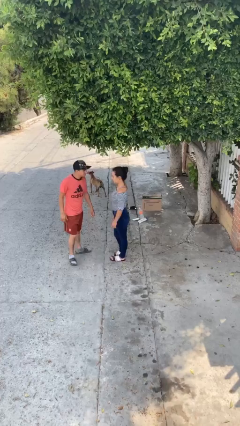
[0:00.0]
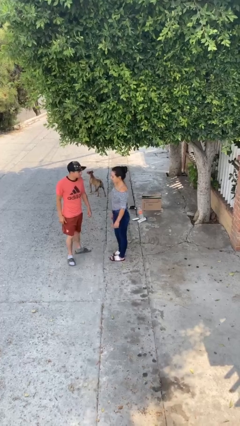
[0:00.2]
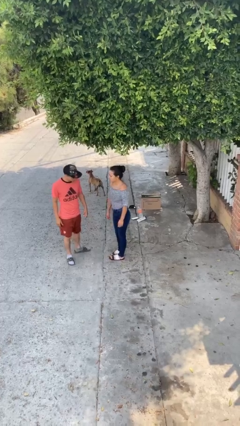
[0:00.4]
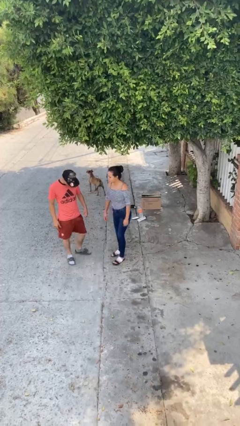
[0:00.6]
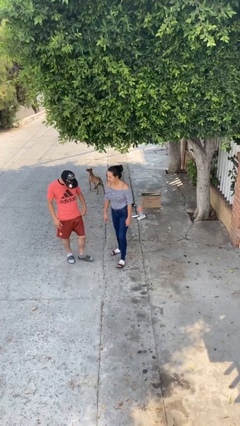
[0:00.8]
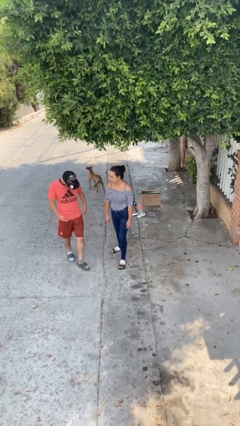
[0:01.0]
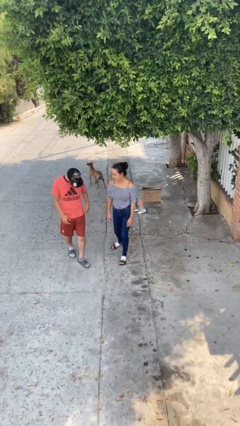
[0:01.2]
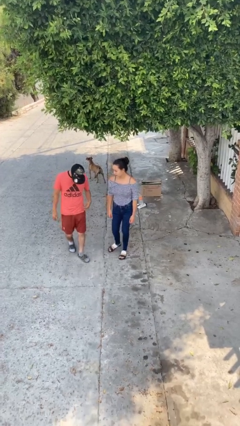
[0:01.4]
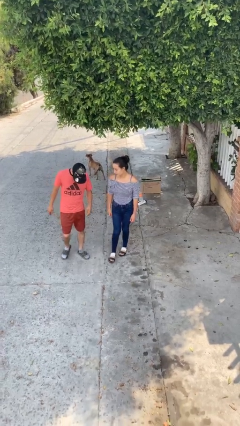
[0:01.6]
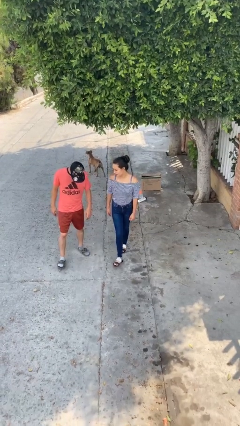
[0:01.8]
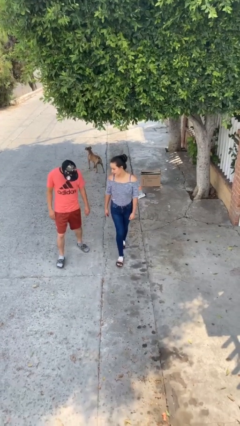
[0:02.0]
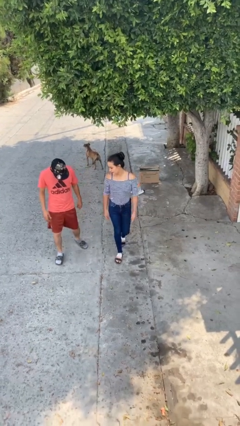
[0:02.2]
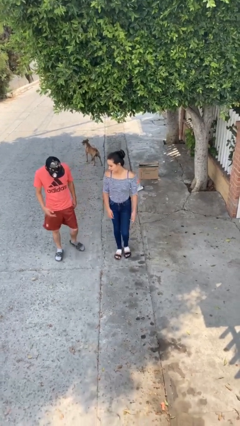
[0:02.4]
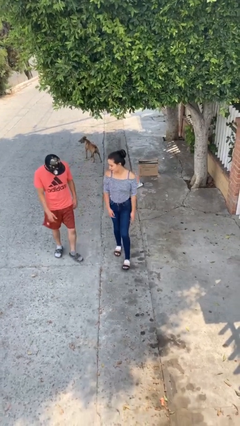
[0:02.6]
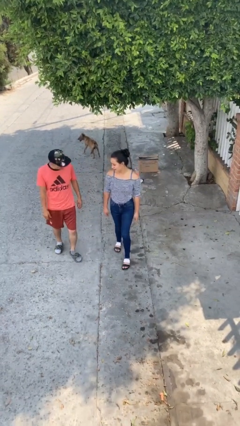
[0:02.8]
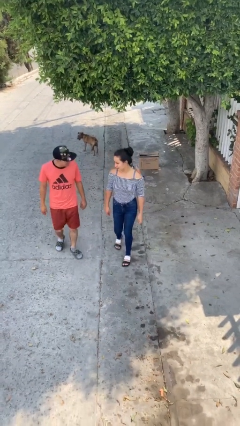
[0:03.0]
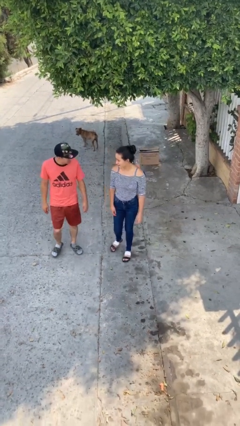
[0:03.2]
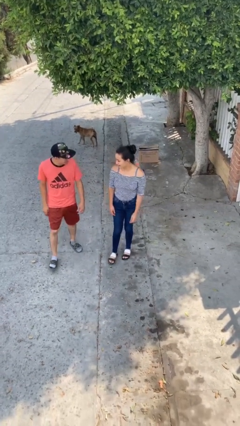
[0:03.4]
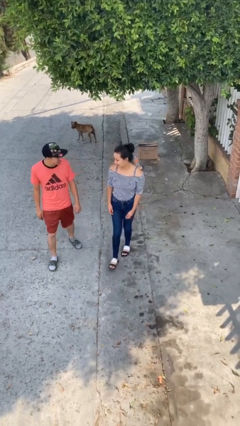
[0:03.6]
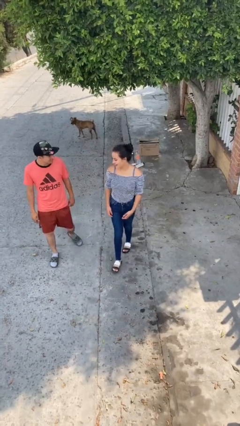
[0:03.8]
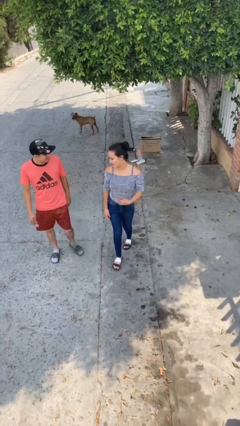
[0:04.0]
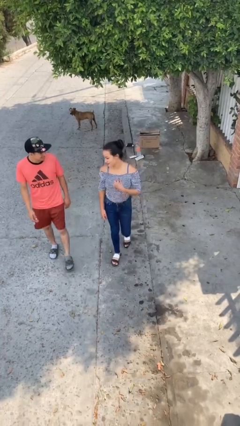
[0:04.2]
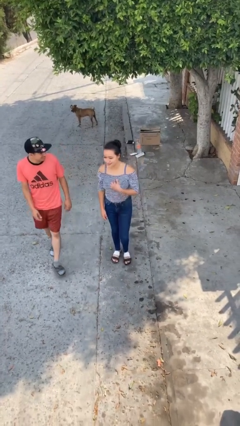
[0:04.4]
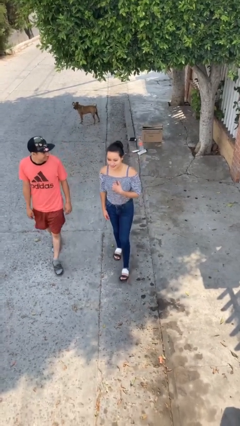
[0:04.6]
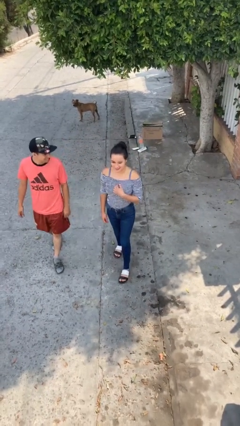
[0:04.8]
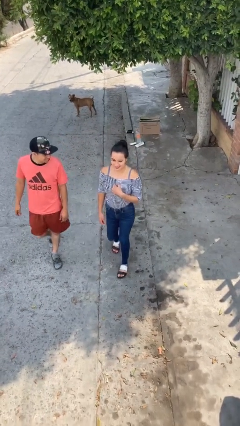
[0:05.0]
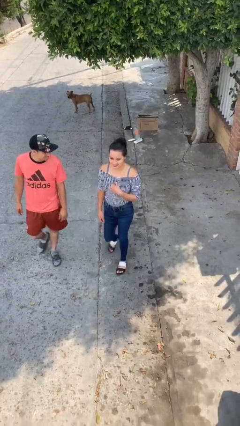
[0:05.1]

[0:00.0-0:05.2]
person talks to person

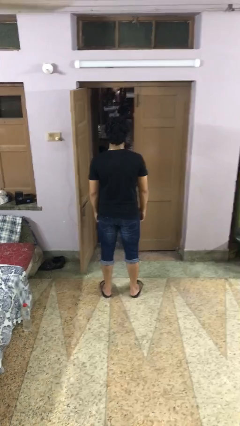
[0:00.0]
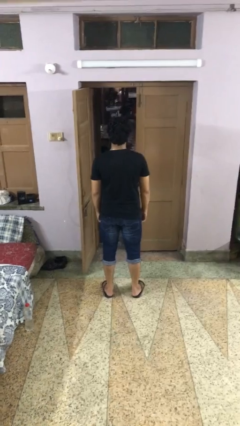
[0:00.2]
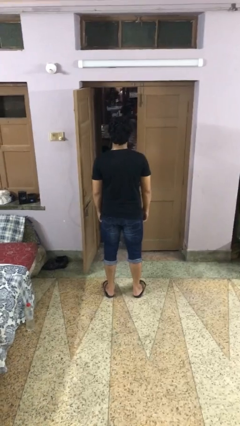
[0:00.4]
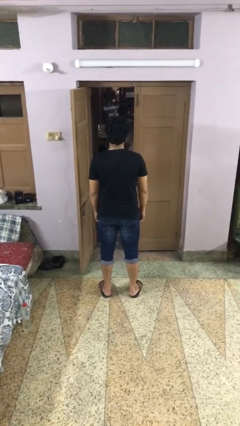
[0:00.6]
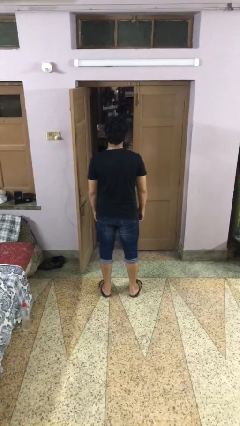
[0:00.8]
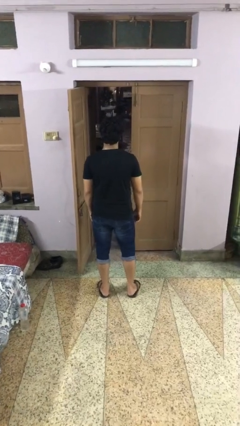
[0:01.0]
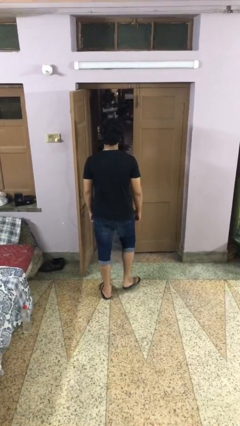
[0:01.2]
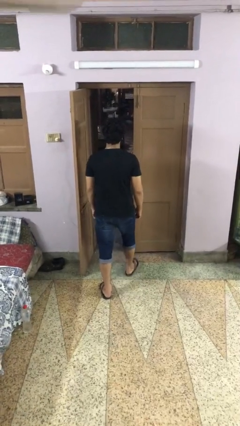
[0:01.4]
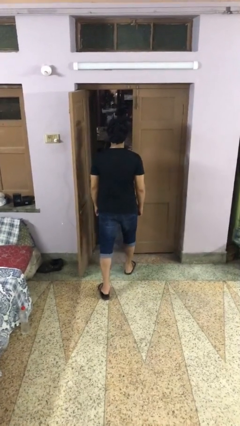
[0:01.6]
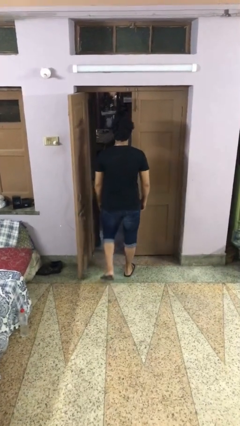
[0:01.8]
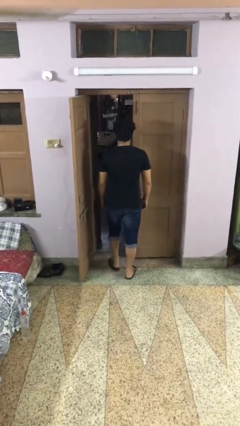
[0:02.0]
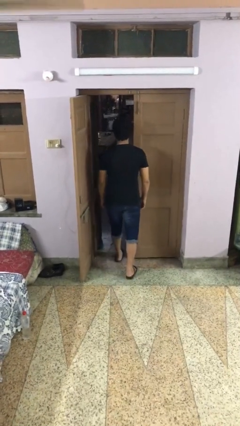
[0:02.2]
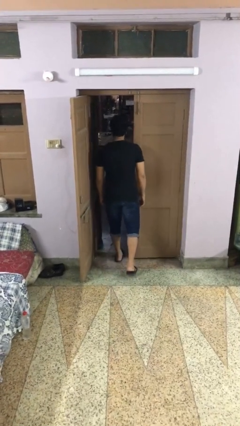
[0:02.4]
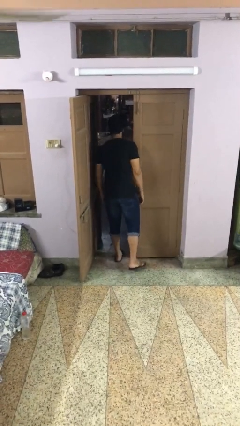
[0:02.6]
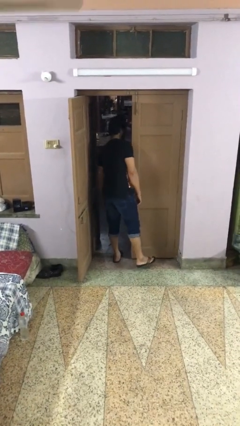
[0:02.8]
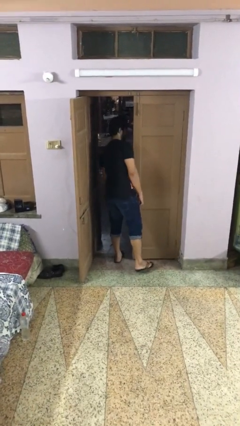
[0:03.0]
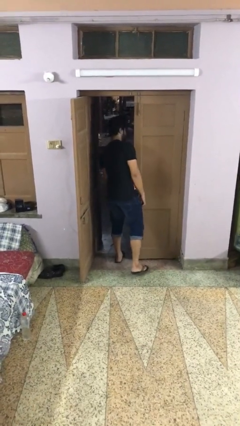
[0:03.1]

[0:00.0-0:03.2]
person bumps into wall

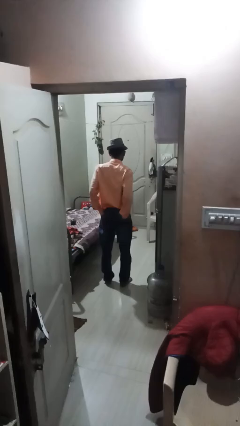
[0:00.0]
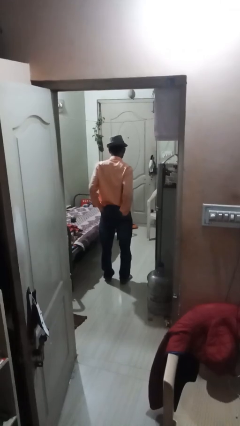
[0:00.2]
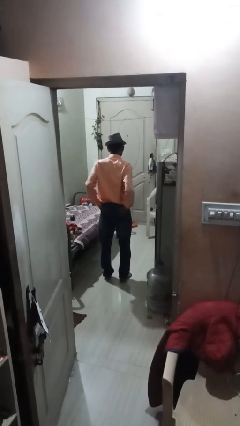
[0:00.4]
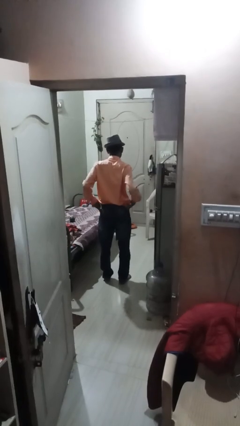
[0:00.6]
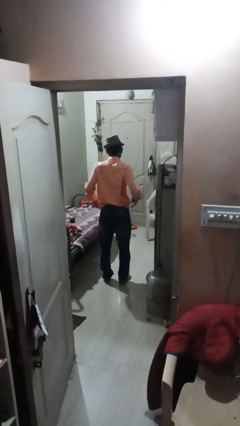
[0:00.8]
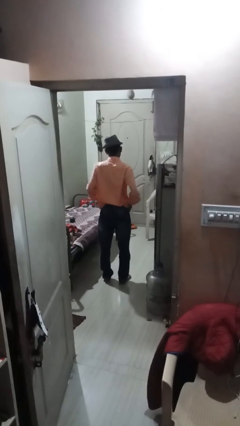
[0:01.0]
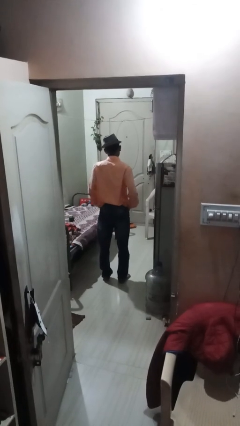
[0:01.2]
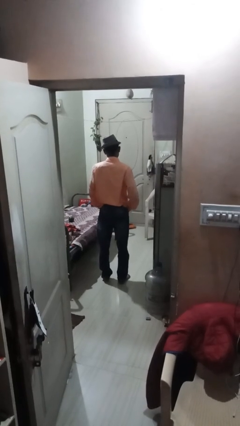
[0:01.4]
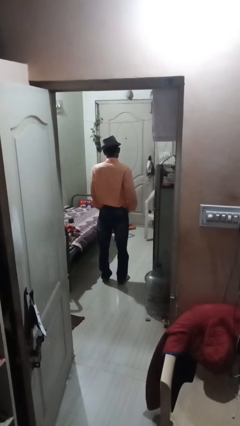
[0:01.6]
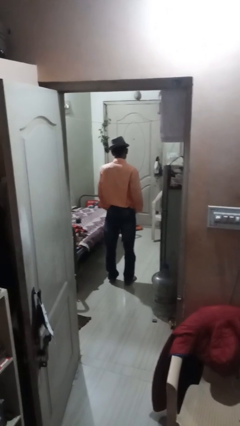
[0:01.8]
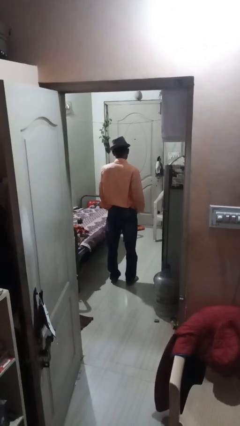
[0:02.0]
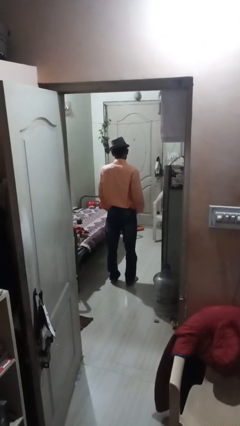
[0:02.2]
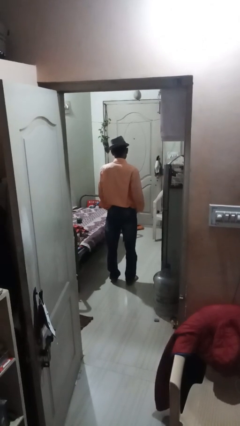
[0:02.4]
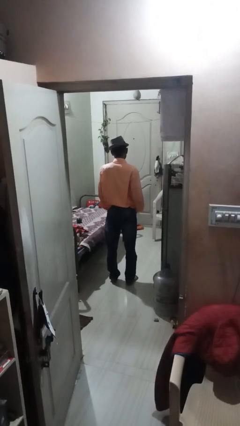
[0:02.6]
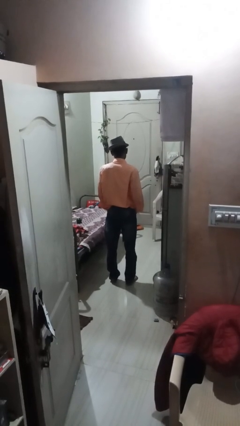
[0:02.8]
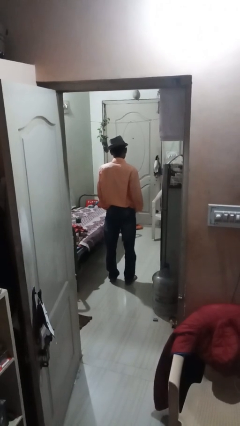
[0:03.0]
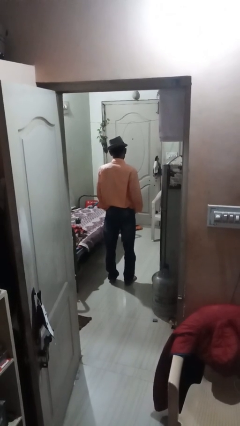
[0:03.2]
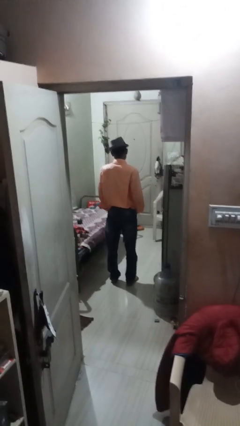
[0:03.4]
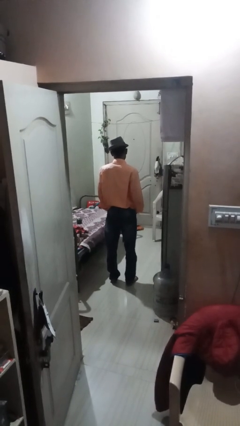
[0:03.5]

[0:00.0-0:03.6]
person puts hands in back pockets

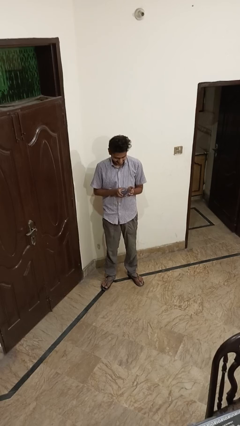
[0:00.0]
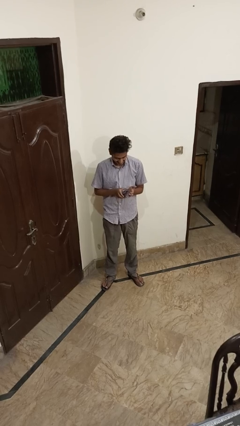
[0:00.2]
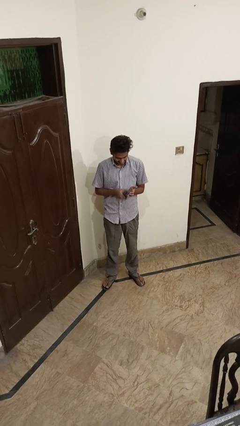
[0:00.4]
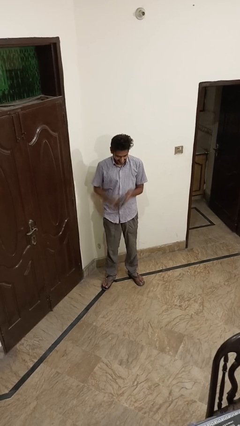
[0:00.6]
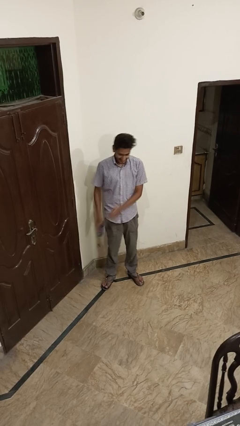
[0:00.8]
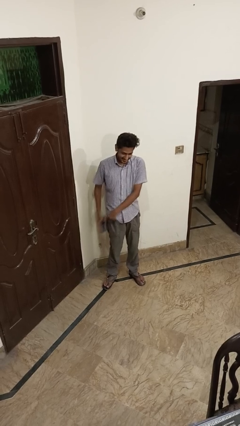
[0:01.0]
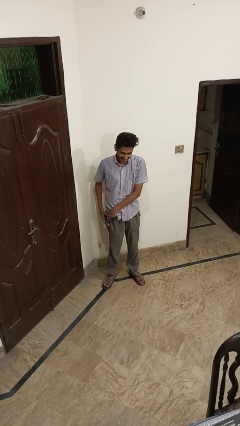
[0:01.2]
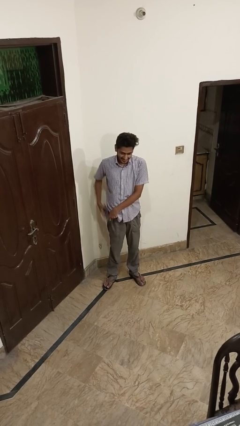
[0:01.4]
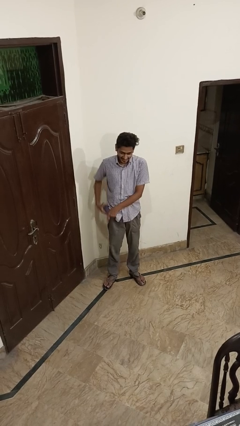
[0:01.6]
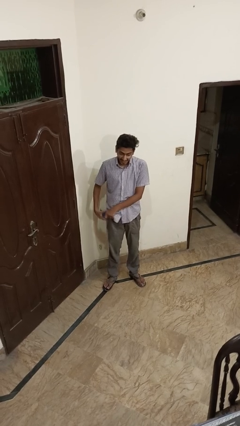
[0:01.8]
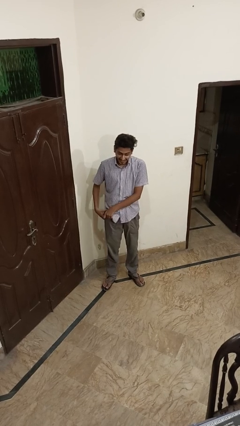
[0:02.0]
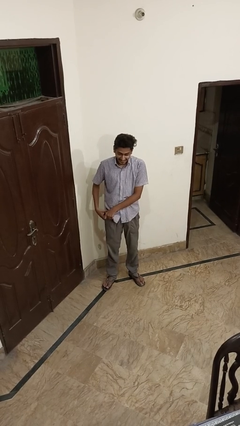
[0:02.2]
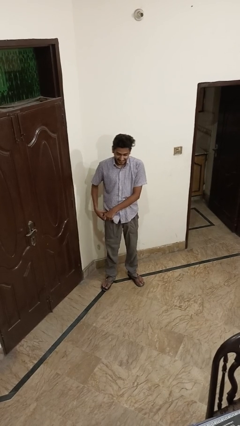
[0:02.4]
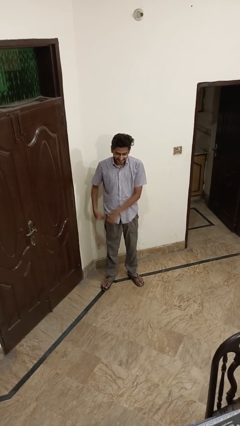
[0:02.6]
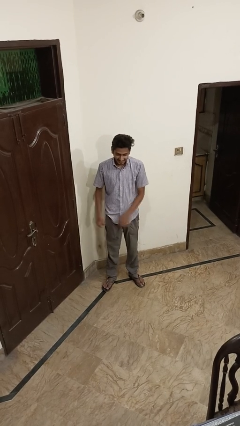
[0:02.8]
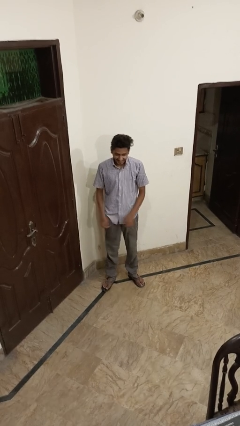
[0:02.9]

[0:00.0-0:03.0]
person puts phone into pocket

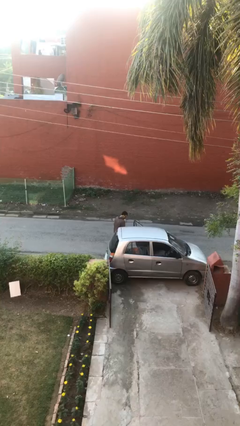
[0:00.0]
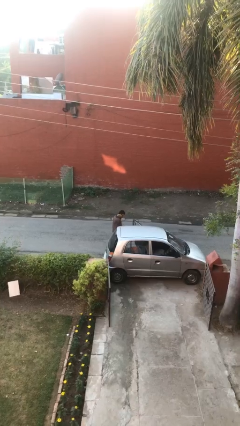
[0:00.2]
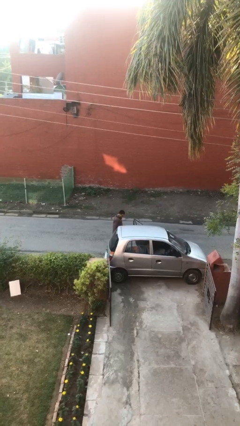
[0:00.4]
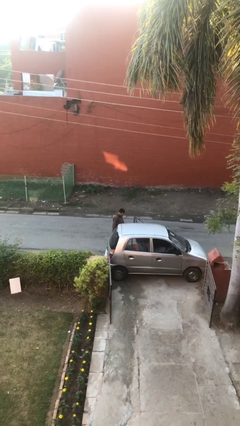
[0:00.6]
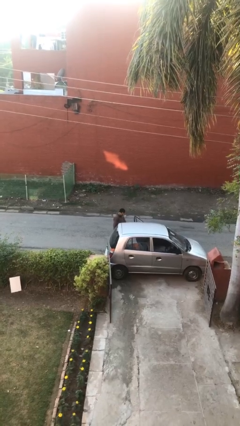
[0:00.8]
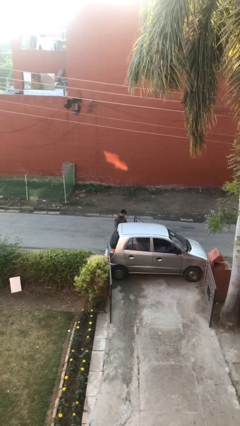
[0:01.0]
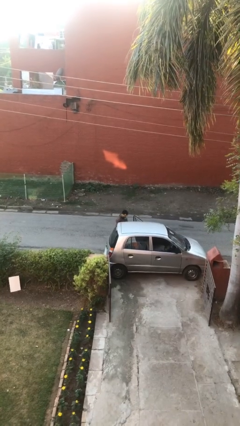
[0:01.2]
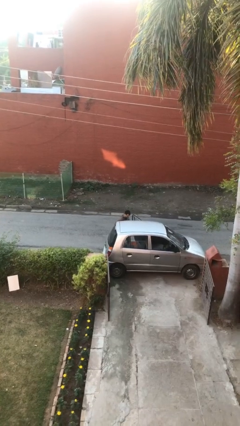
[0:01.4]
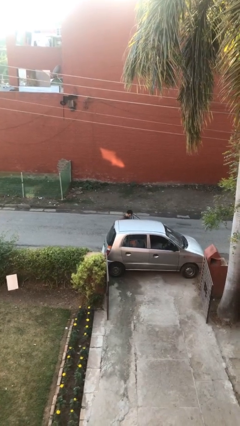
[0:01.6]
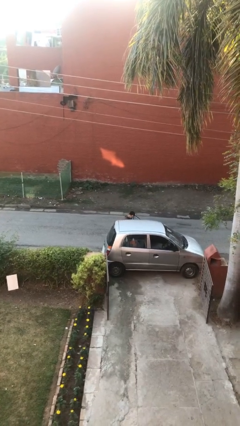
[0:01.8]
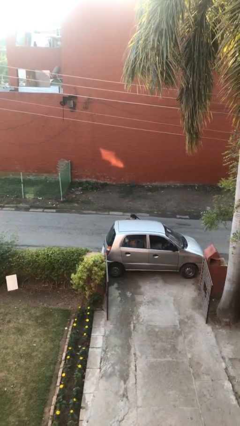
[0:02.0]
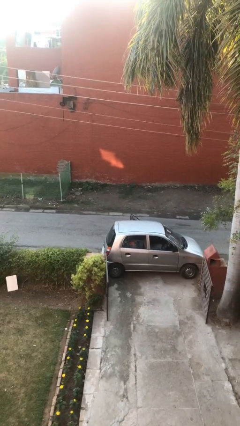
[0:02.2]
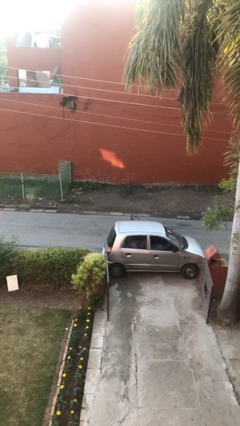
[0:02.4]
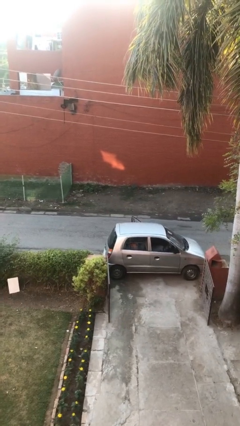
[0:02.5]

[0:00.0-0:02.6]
person enters car
